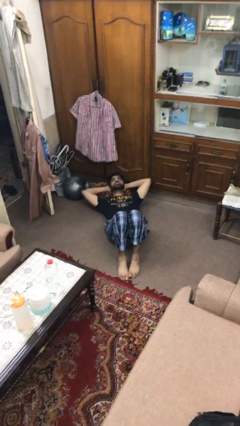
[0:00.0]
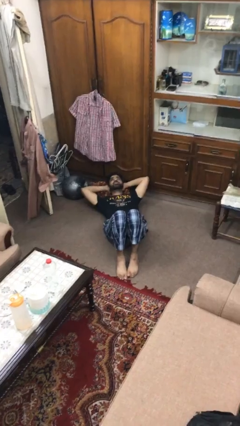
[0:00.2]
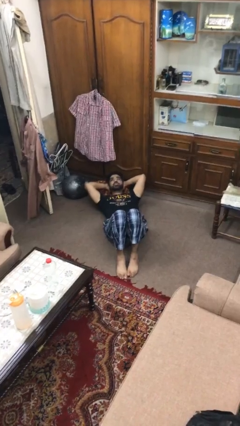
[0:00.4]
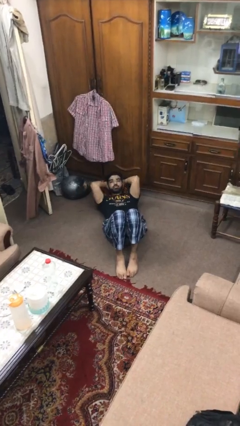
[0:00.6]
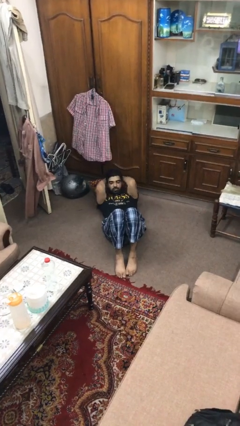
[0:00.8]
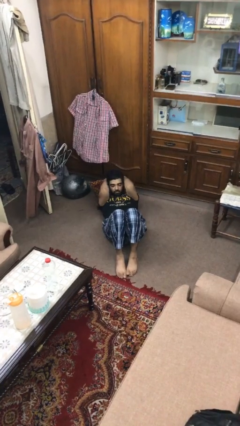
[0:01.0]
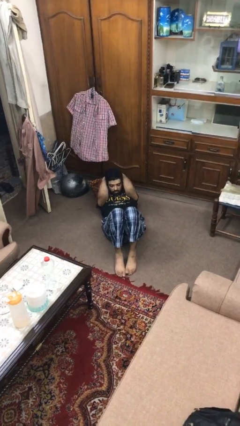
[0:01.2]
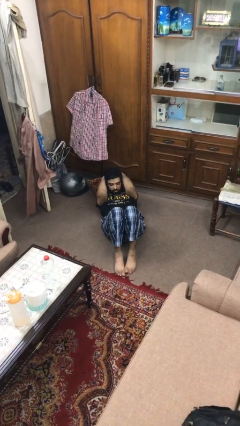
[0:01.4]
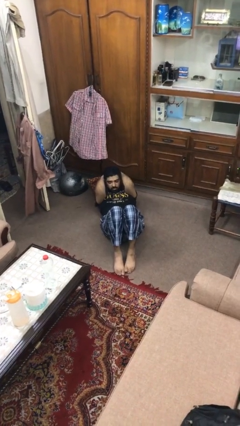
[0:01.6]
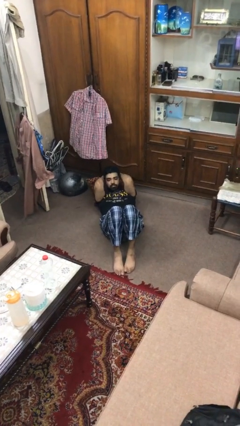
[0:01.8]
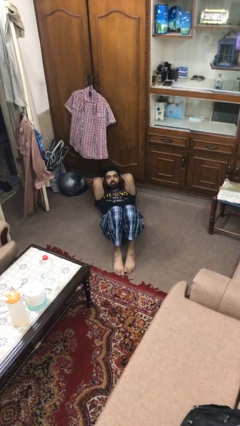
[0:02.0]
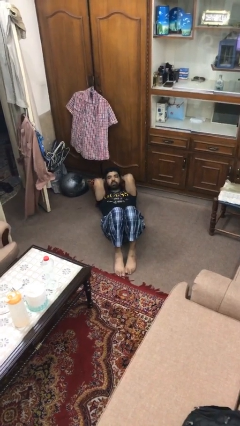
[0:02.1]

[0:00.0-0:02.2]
person exercises with situp

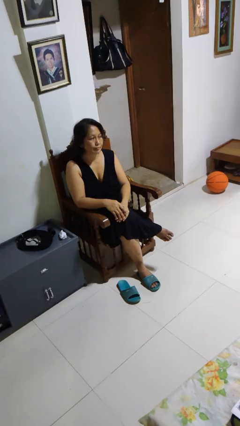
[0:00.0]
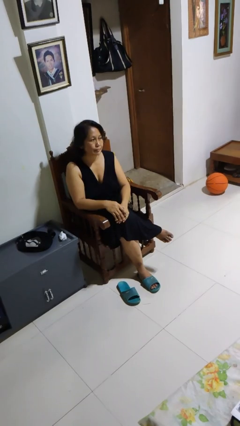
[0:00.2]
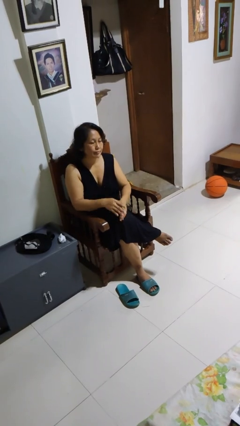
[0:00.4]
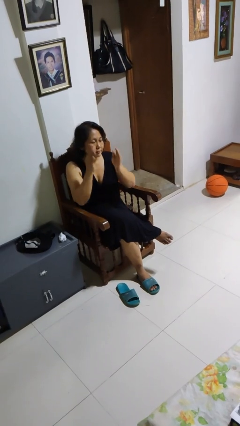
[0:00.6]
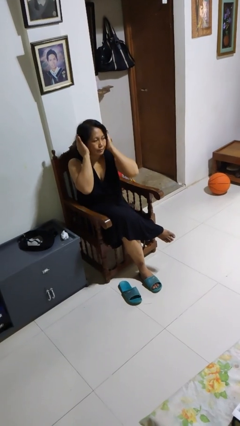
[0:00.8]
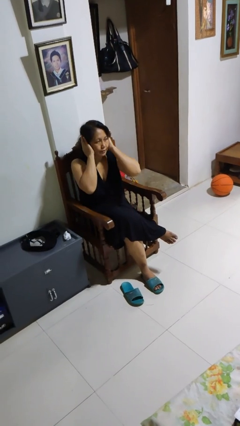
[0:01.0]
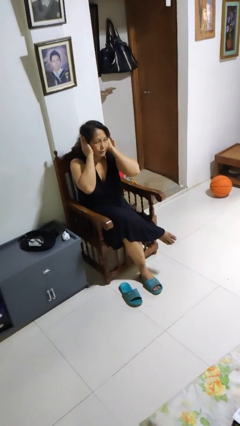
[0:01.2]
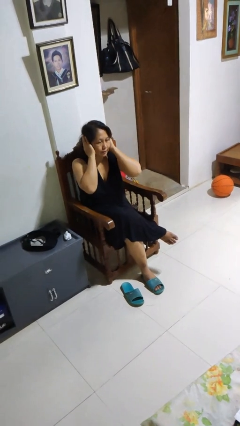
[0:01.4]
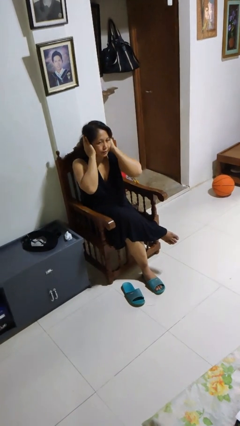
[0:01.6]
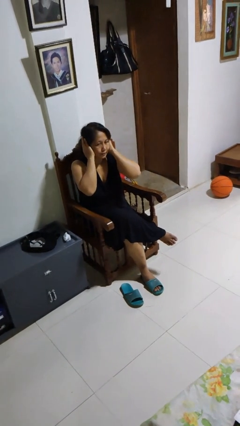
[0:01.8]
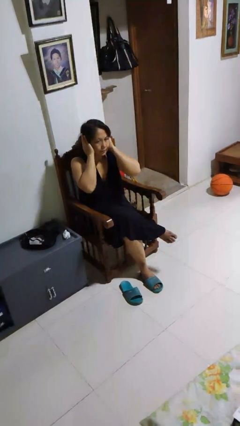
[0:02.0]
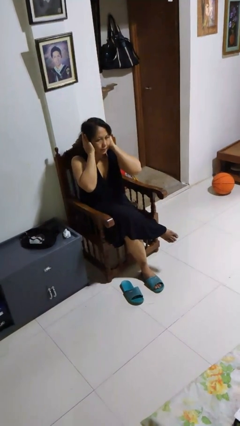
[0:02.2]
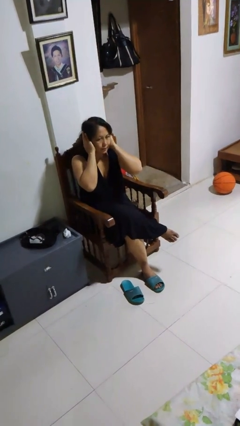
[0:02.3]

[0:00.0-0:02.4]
person puts fingers in ear

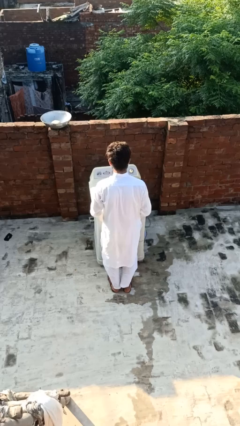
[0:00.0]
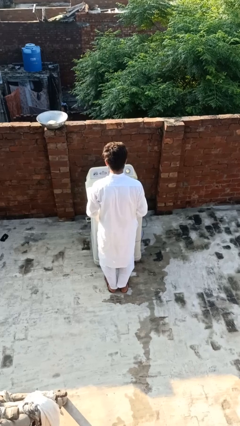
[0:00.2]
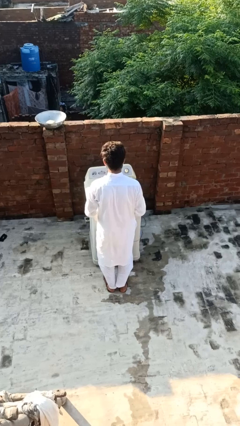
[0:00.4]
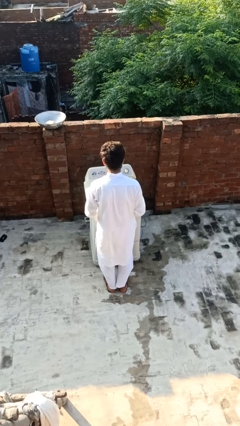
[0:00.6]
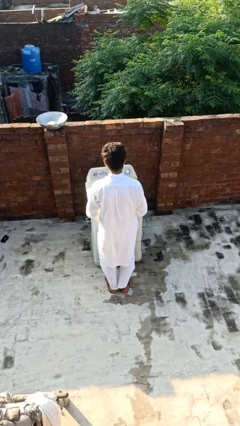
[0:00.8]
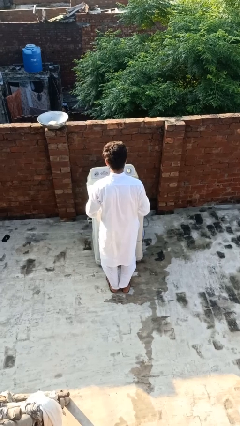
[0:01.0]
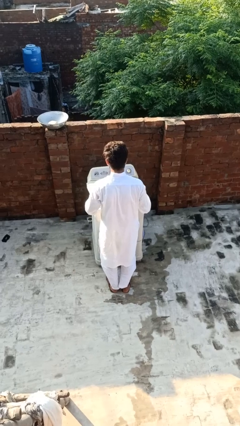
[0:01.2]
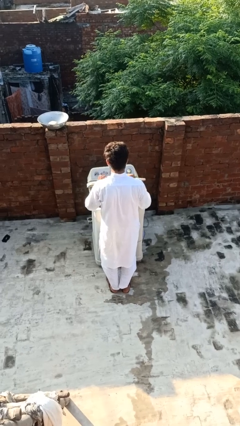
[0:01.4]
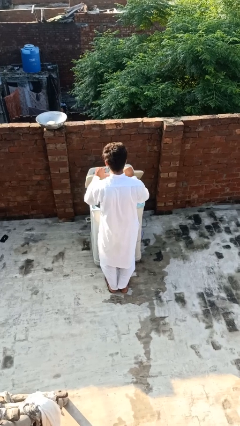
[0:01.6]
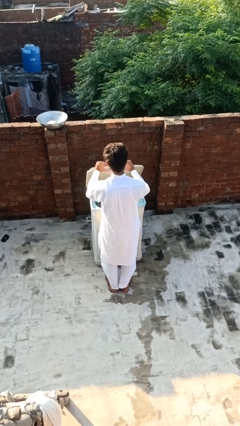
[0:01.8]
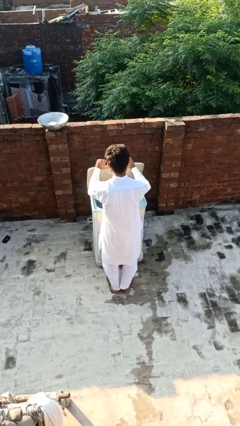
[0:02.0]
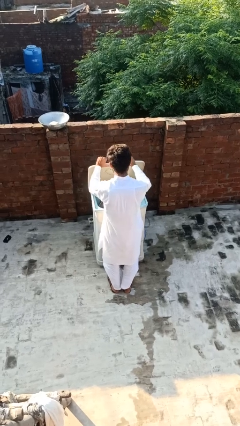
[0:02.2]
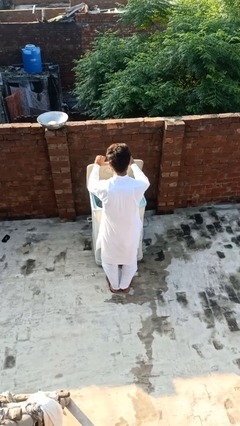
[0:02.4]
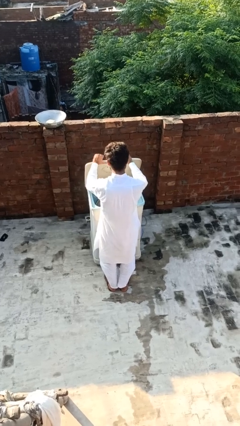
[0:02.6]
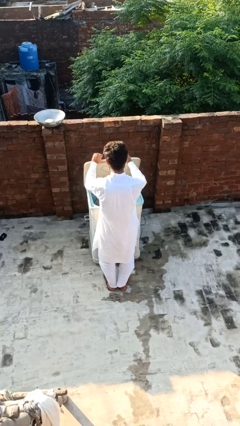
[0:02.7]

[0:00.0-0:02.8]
person opens clothes washer

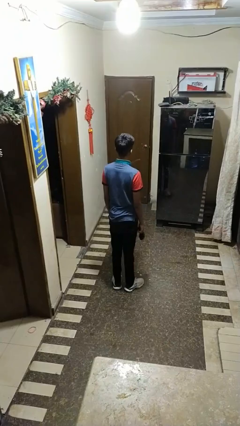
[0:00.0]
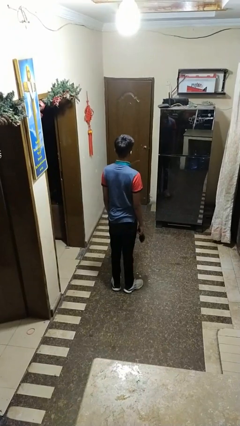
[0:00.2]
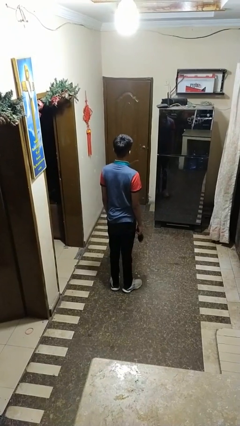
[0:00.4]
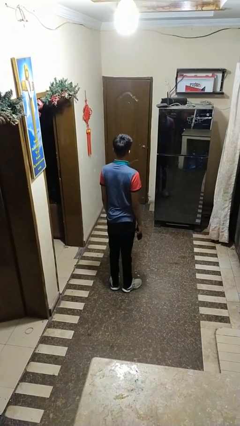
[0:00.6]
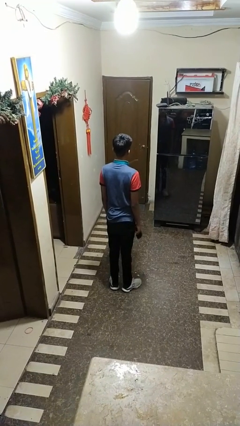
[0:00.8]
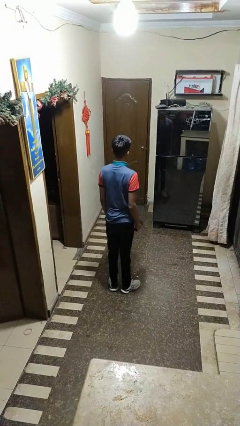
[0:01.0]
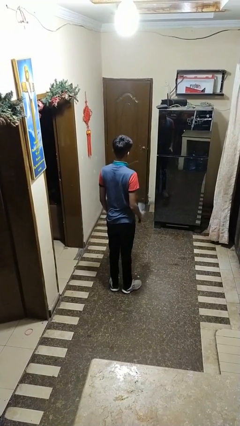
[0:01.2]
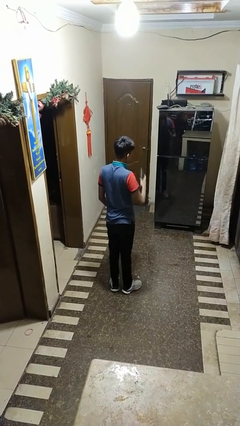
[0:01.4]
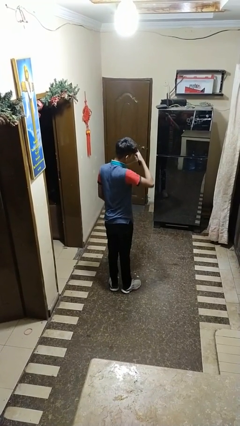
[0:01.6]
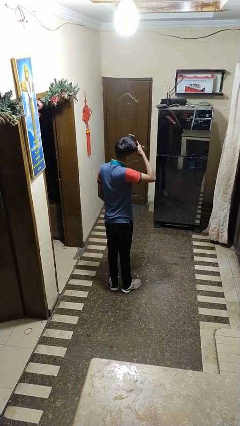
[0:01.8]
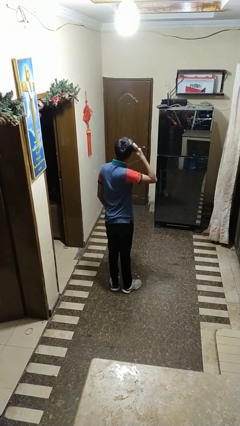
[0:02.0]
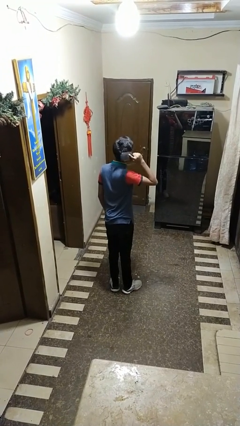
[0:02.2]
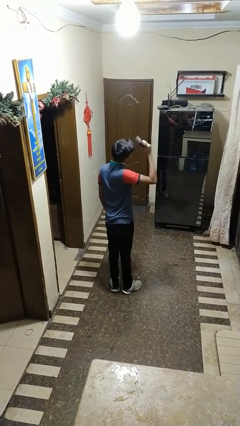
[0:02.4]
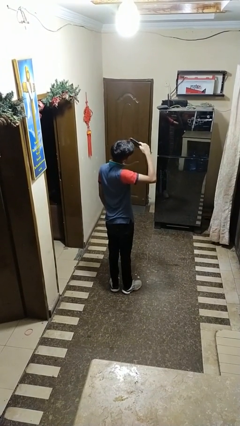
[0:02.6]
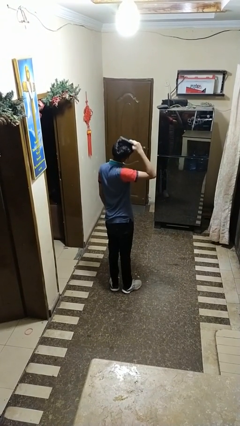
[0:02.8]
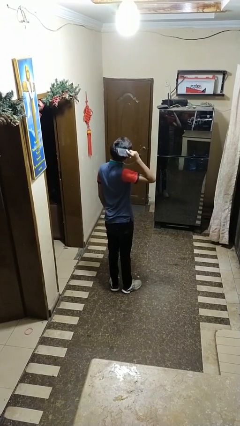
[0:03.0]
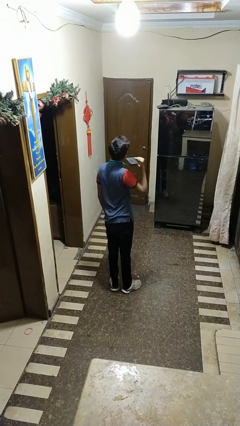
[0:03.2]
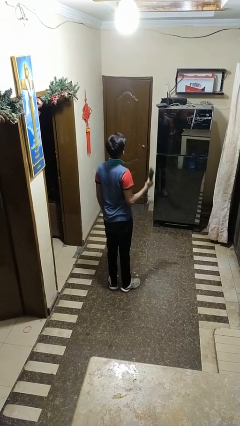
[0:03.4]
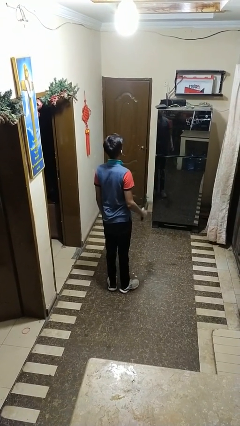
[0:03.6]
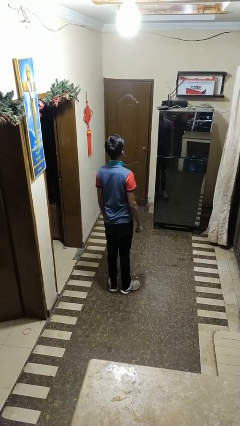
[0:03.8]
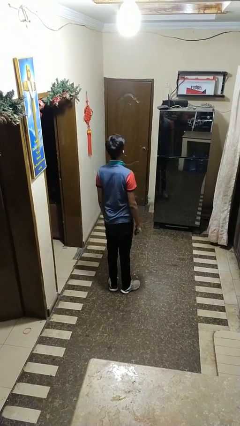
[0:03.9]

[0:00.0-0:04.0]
person brushes hair

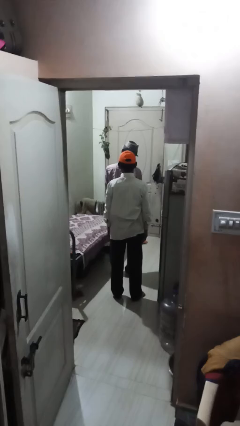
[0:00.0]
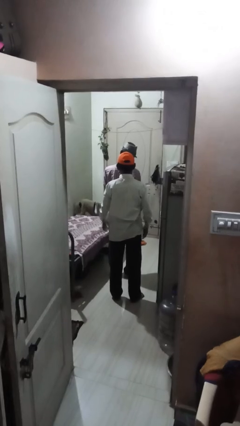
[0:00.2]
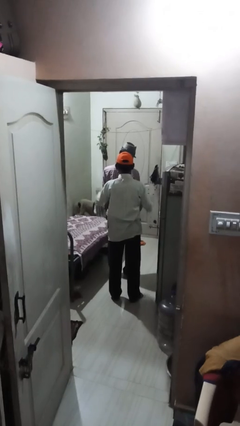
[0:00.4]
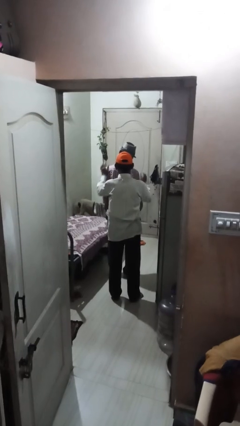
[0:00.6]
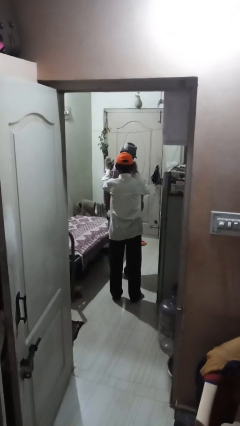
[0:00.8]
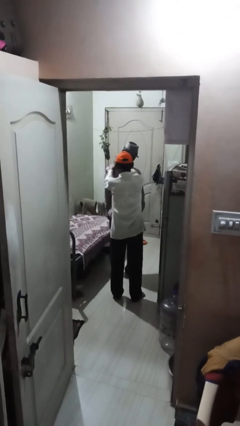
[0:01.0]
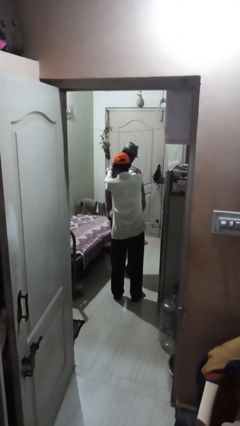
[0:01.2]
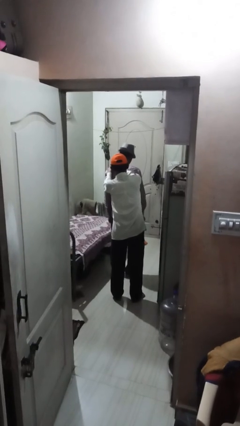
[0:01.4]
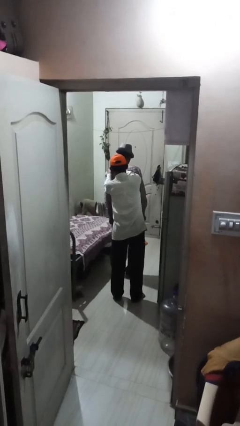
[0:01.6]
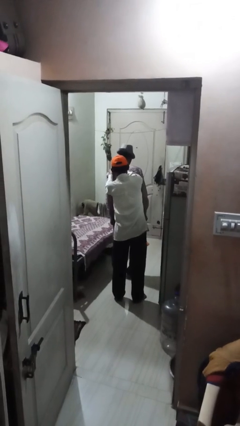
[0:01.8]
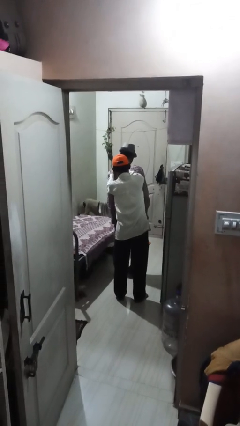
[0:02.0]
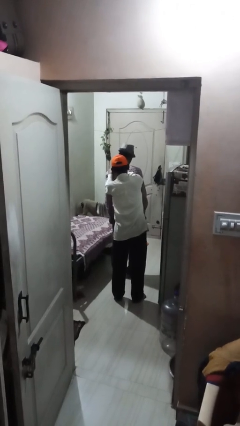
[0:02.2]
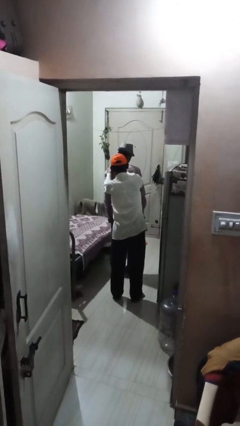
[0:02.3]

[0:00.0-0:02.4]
person touches back of person

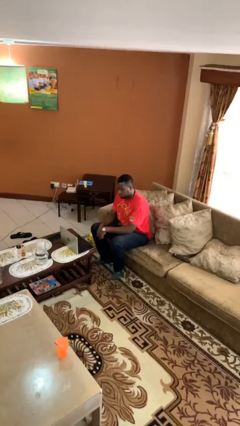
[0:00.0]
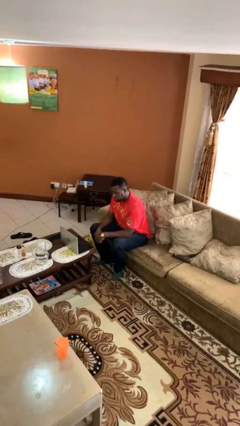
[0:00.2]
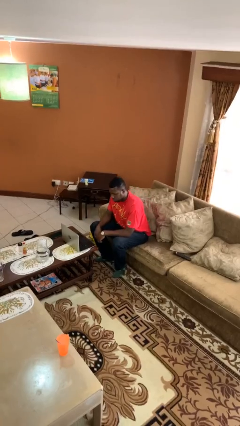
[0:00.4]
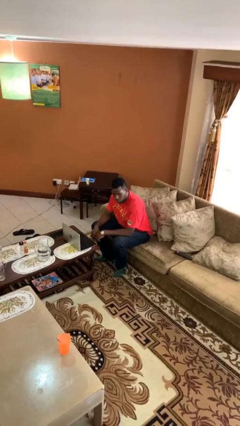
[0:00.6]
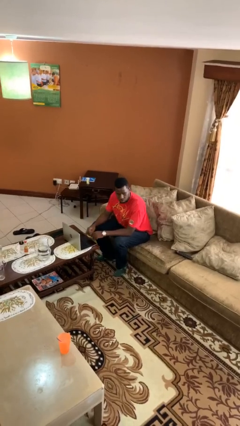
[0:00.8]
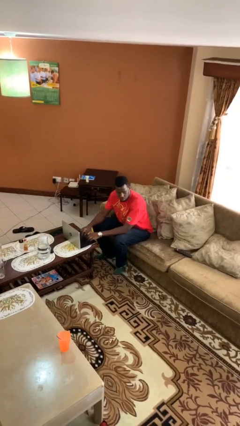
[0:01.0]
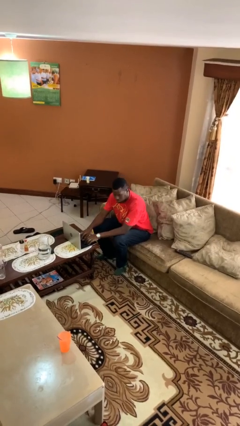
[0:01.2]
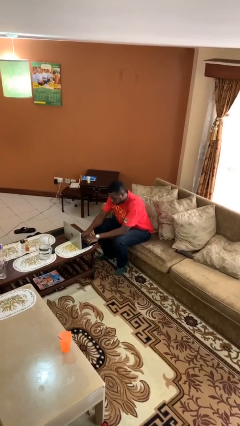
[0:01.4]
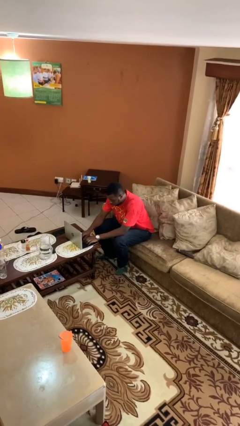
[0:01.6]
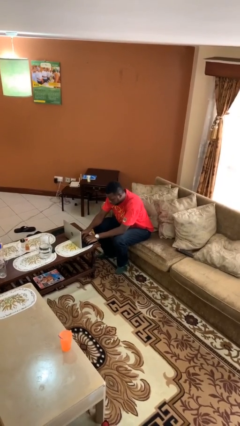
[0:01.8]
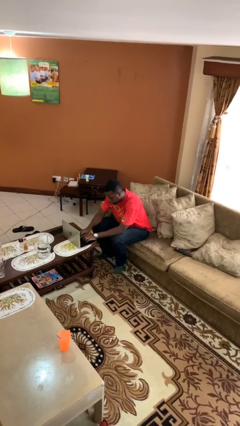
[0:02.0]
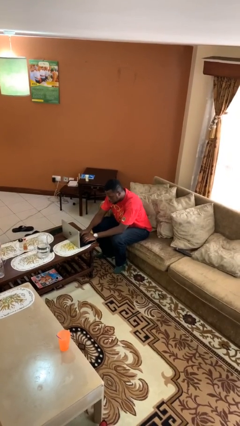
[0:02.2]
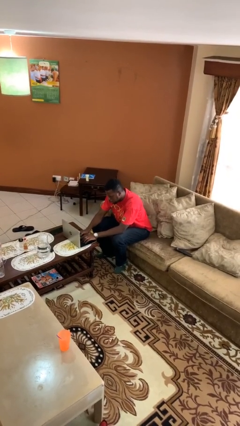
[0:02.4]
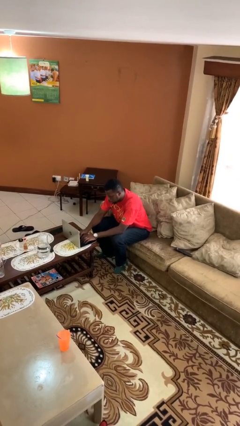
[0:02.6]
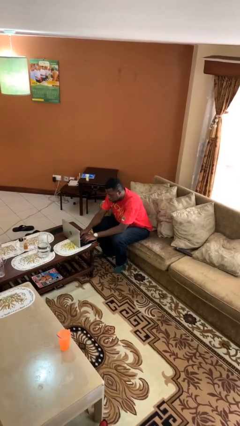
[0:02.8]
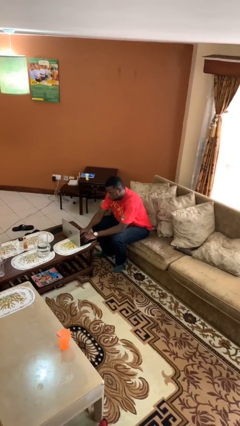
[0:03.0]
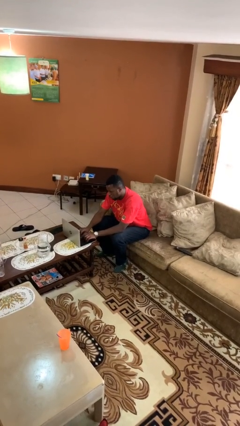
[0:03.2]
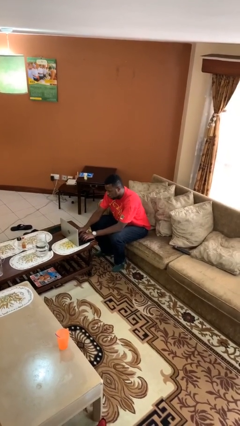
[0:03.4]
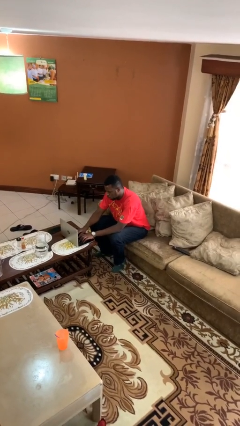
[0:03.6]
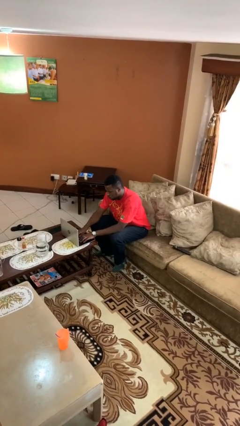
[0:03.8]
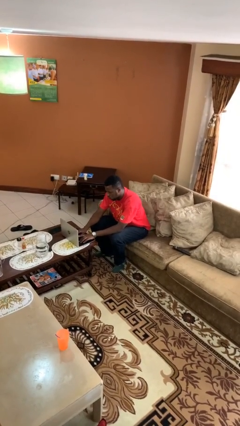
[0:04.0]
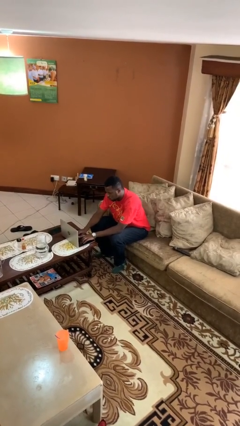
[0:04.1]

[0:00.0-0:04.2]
person interacts with laptop
